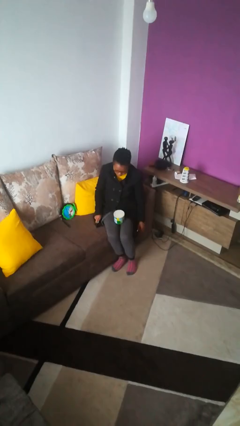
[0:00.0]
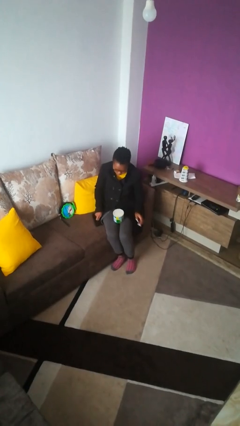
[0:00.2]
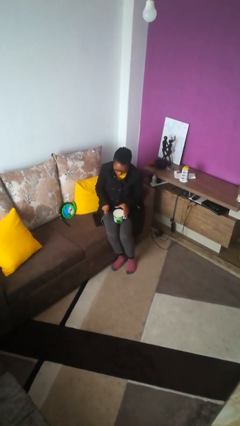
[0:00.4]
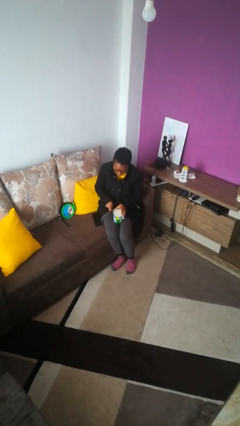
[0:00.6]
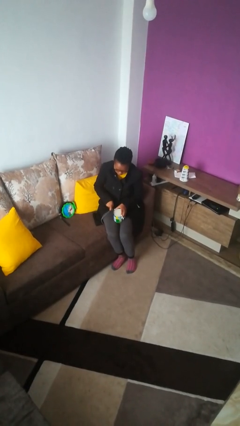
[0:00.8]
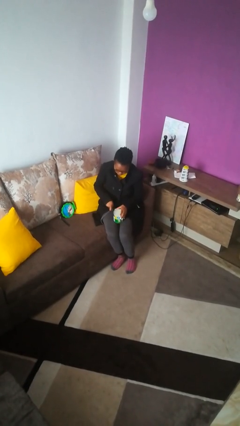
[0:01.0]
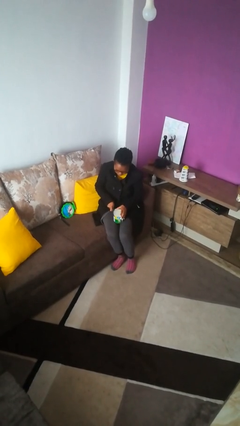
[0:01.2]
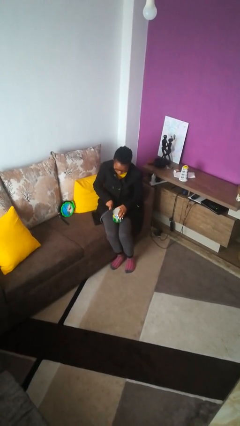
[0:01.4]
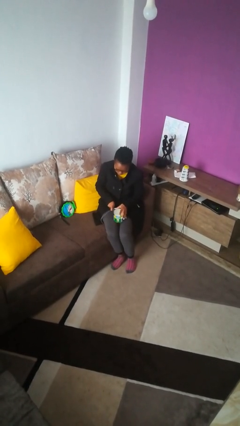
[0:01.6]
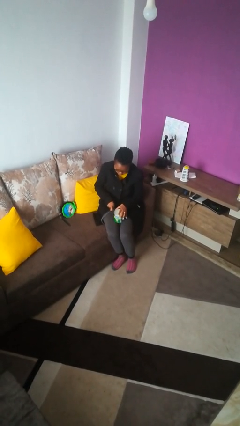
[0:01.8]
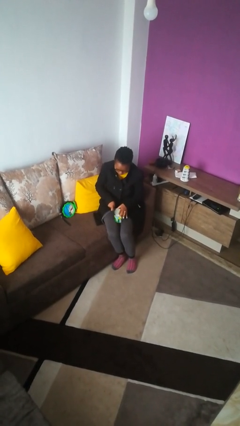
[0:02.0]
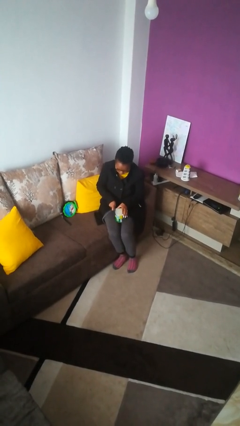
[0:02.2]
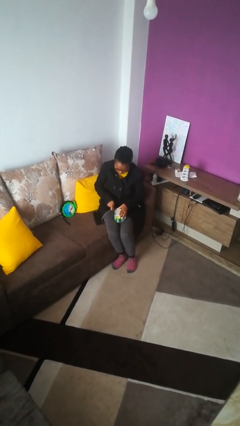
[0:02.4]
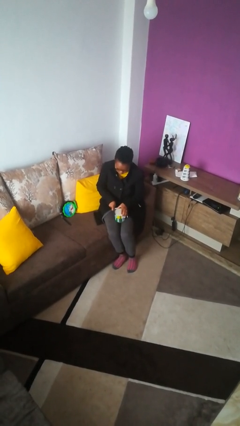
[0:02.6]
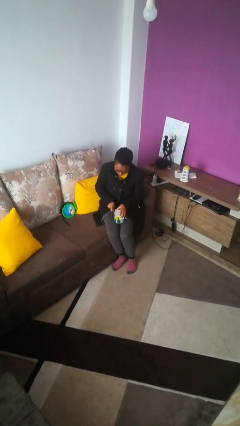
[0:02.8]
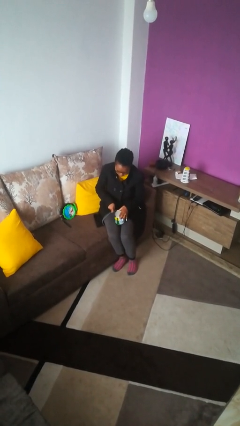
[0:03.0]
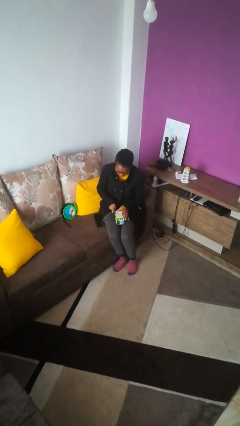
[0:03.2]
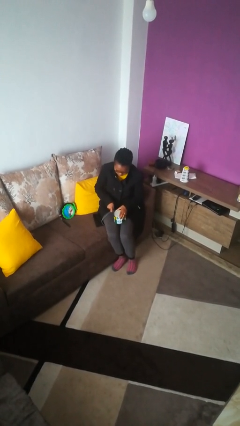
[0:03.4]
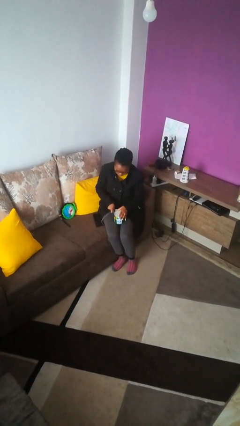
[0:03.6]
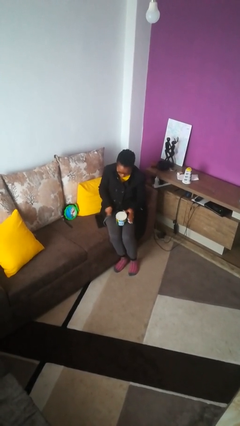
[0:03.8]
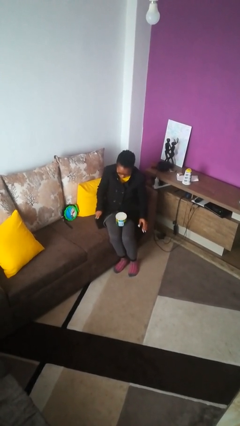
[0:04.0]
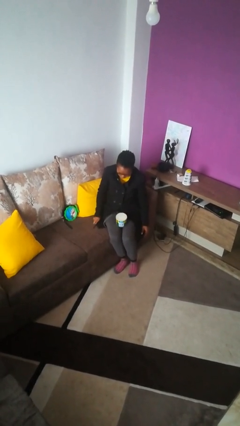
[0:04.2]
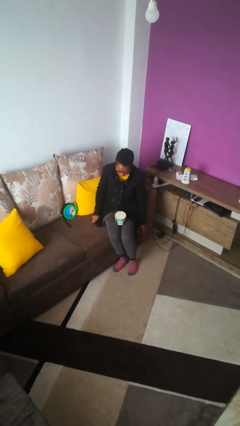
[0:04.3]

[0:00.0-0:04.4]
person opens can with can opener

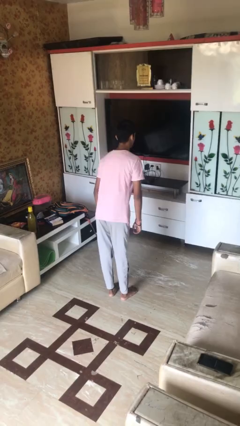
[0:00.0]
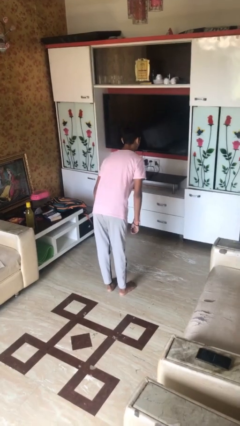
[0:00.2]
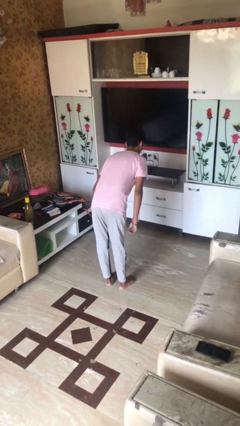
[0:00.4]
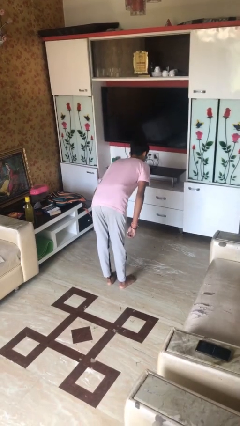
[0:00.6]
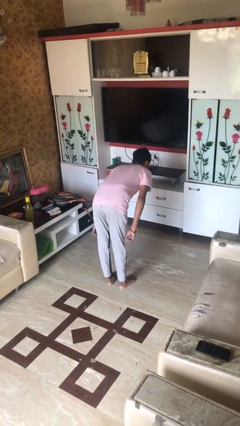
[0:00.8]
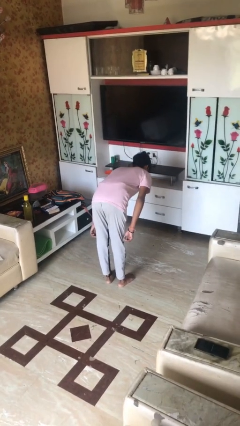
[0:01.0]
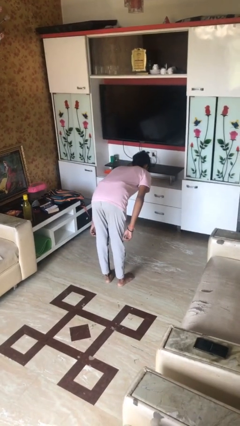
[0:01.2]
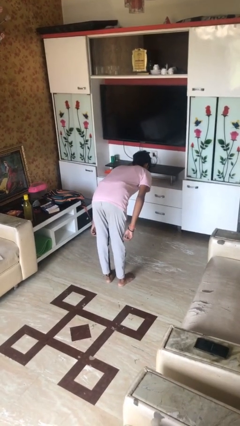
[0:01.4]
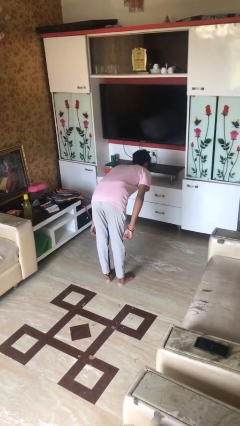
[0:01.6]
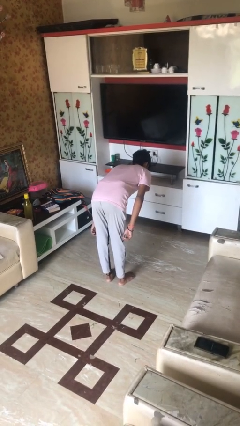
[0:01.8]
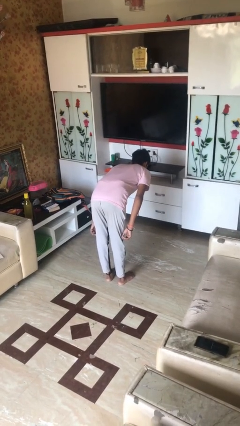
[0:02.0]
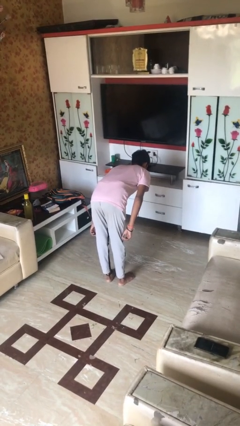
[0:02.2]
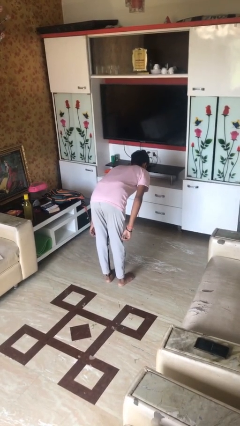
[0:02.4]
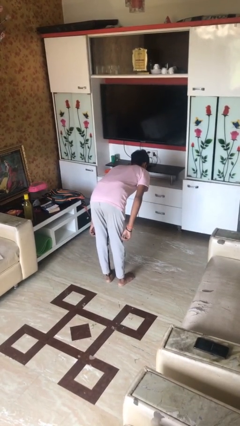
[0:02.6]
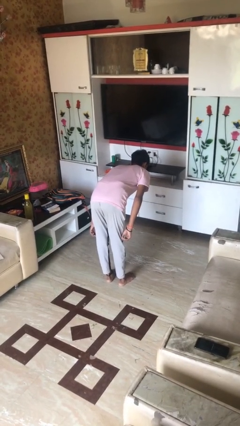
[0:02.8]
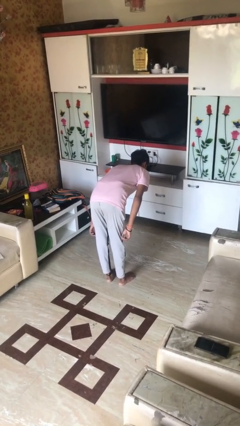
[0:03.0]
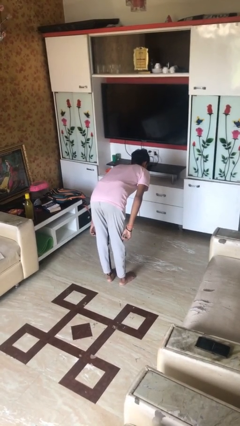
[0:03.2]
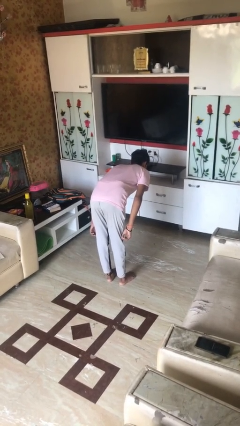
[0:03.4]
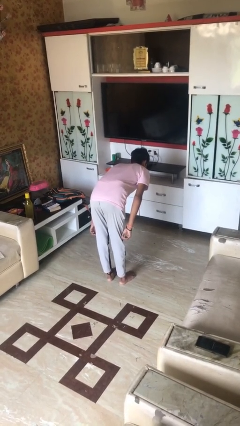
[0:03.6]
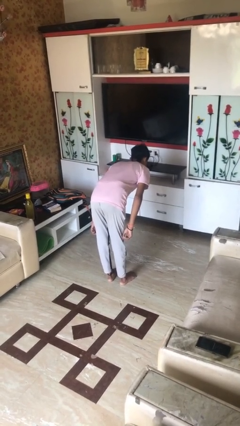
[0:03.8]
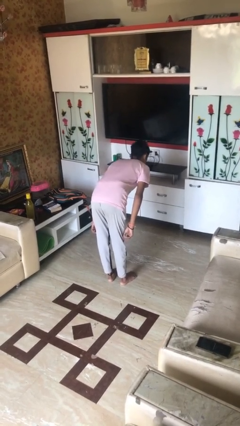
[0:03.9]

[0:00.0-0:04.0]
person bows

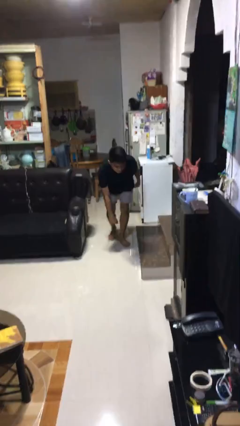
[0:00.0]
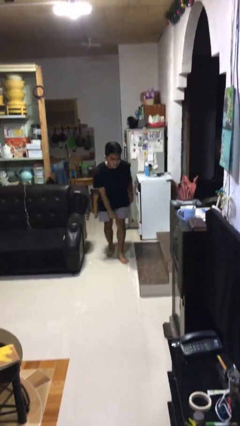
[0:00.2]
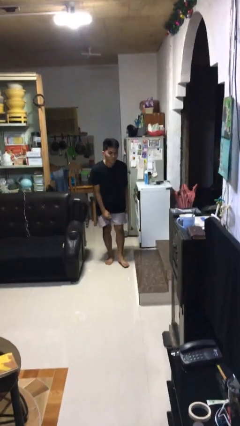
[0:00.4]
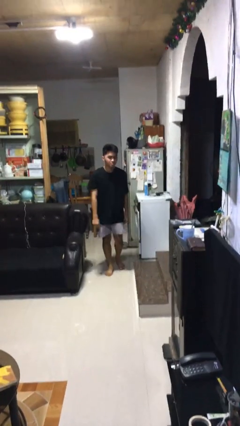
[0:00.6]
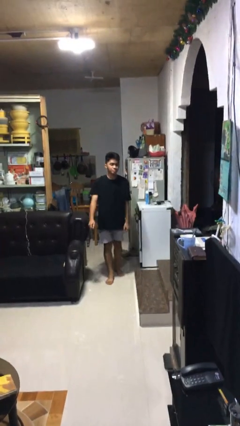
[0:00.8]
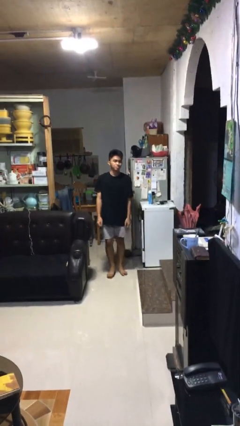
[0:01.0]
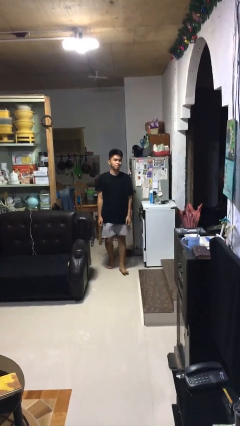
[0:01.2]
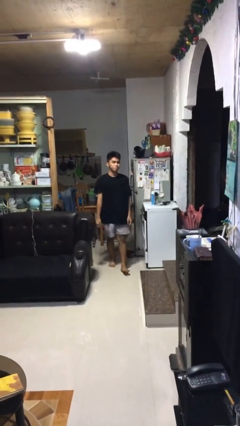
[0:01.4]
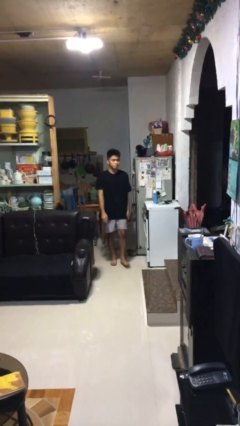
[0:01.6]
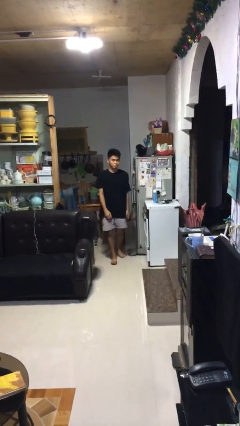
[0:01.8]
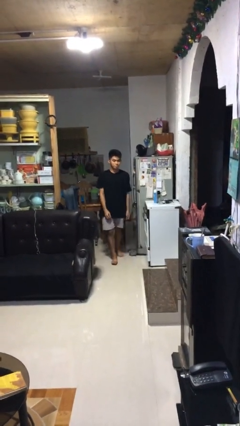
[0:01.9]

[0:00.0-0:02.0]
person stands up from floor

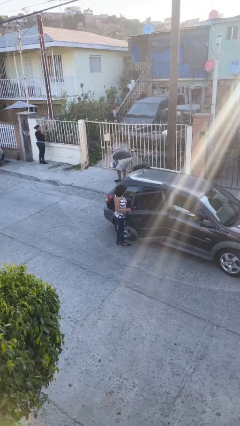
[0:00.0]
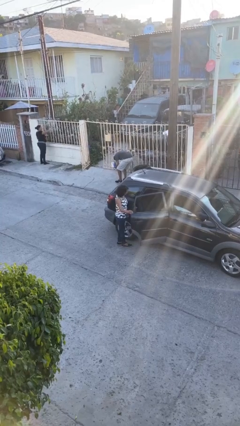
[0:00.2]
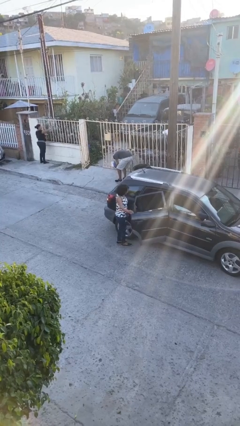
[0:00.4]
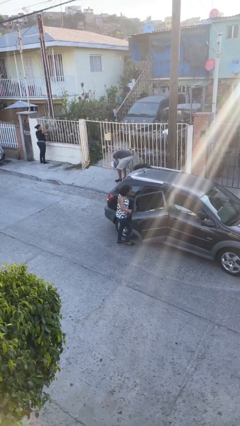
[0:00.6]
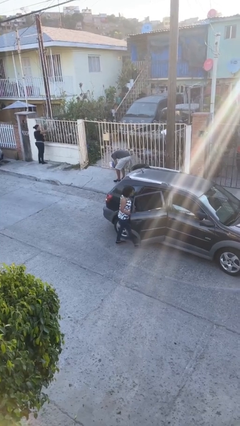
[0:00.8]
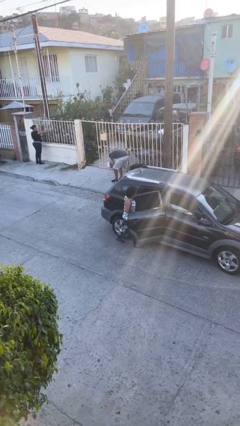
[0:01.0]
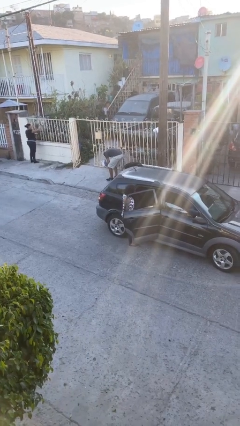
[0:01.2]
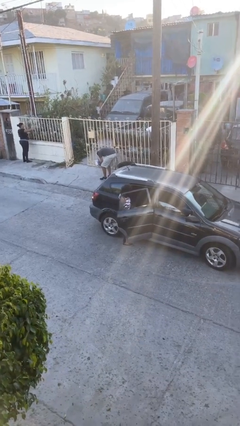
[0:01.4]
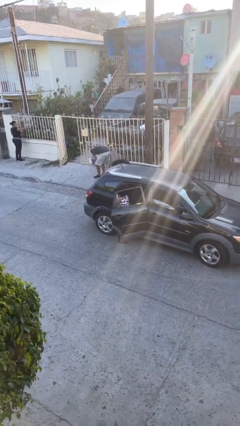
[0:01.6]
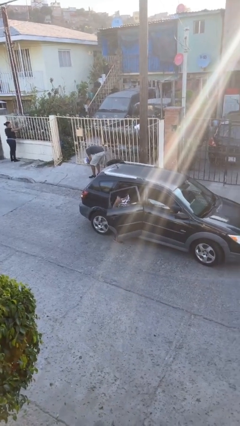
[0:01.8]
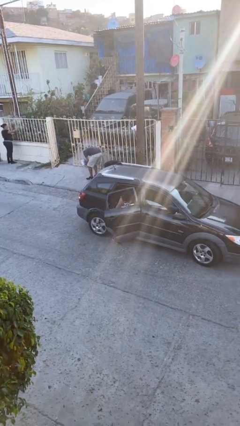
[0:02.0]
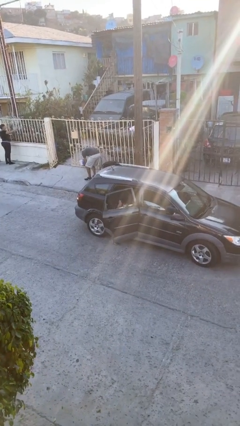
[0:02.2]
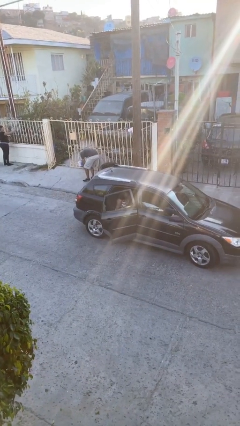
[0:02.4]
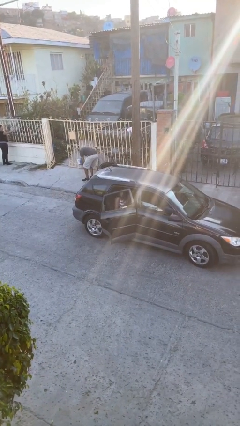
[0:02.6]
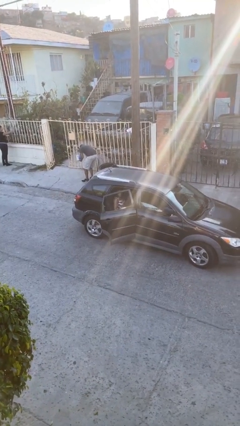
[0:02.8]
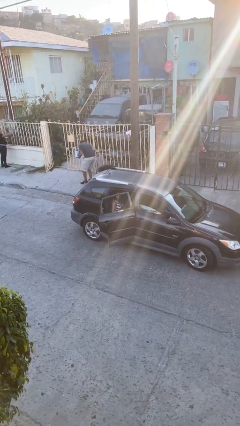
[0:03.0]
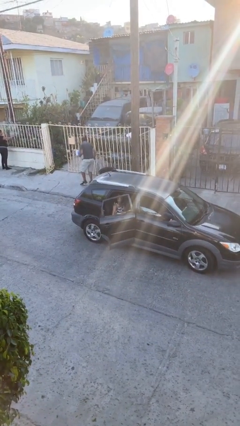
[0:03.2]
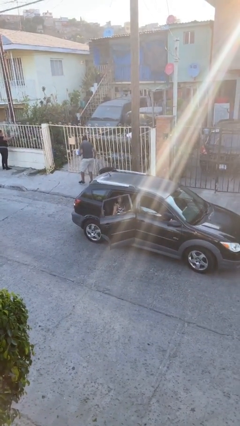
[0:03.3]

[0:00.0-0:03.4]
person enters car

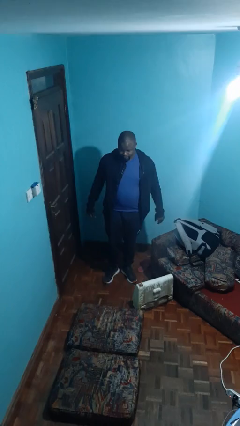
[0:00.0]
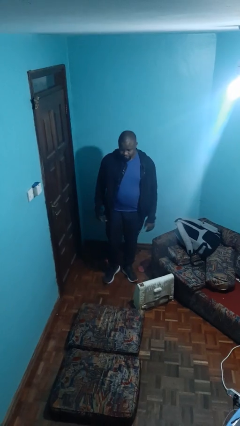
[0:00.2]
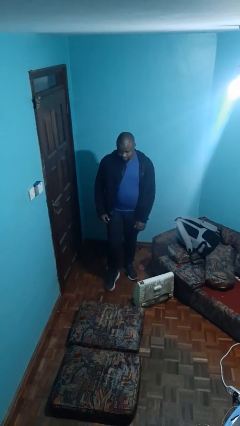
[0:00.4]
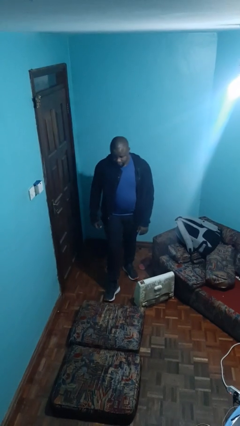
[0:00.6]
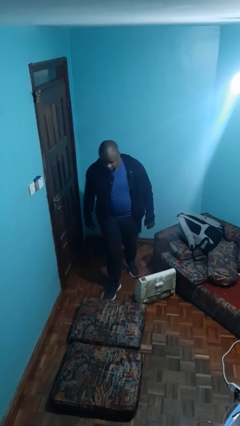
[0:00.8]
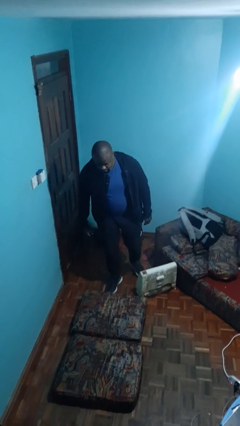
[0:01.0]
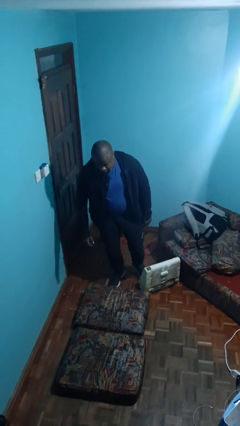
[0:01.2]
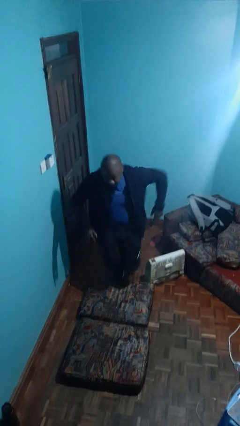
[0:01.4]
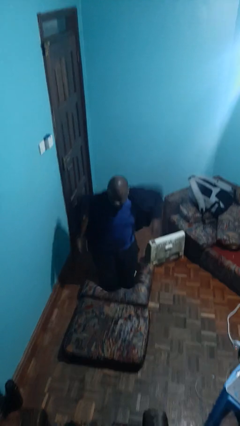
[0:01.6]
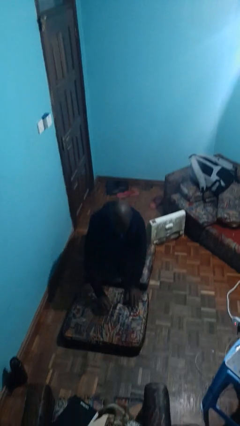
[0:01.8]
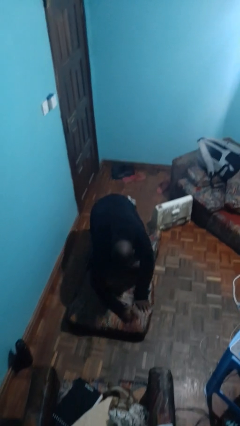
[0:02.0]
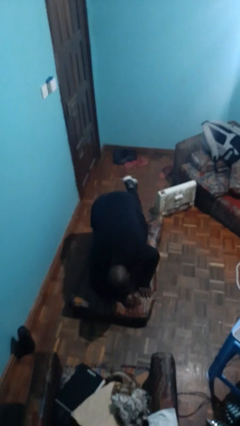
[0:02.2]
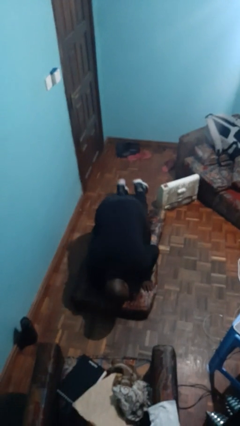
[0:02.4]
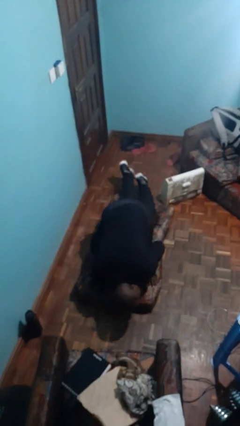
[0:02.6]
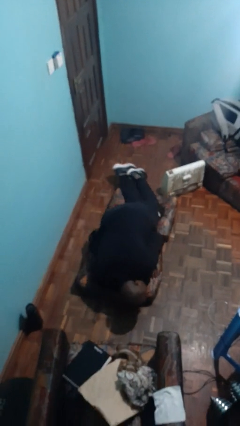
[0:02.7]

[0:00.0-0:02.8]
person trips on object on floor

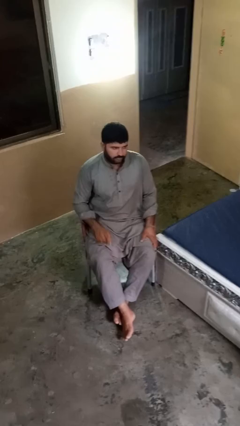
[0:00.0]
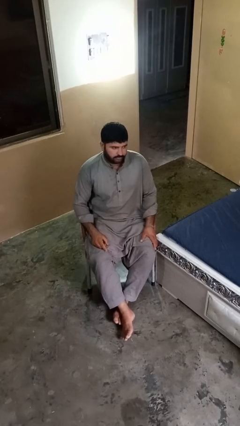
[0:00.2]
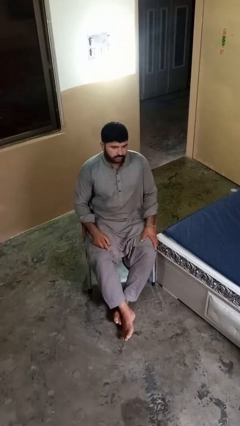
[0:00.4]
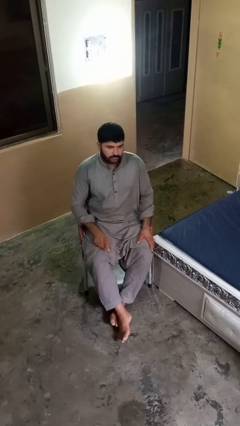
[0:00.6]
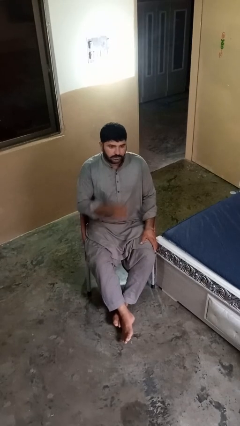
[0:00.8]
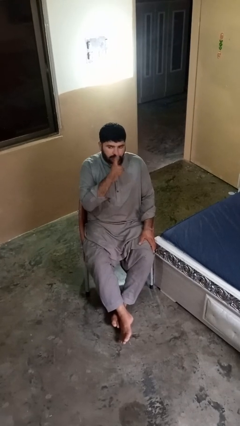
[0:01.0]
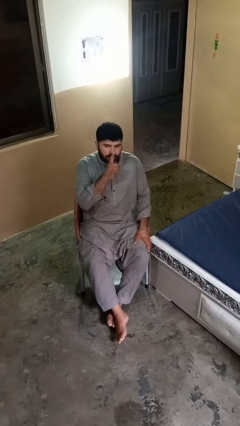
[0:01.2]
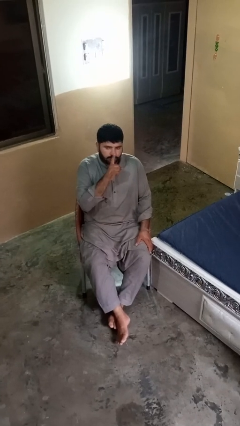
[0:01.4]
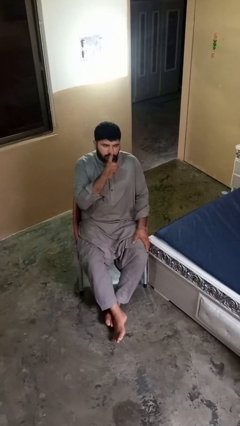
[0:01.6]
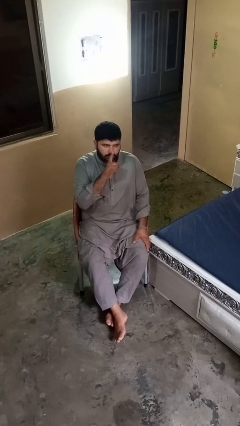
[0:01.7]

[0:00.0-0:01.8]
person gestures be quiet
